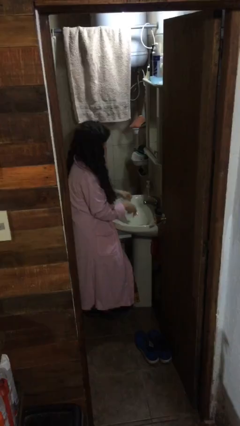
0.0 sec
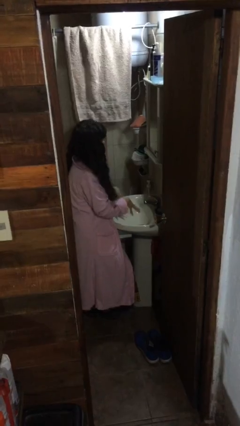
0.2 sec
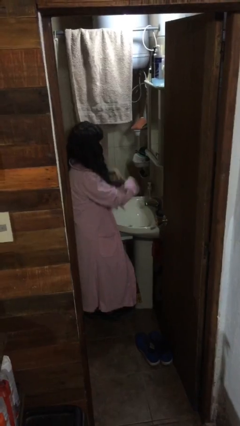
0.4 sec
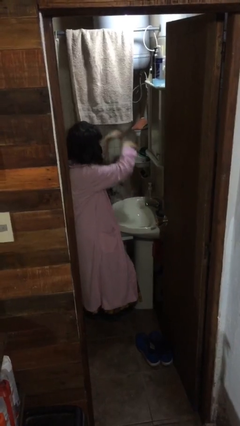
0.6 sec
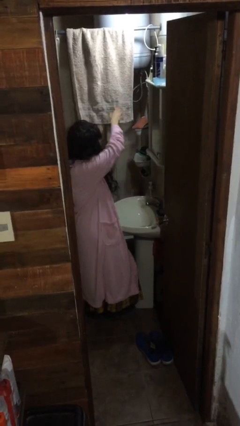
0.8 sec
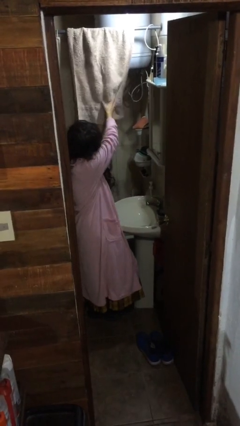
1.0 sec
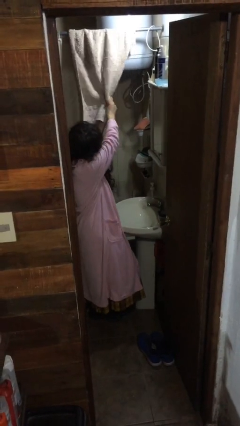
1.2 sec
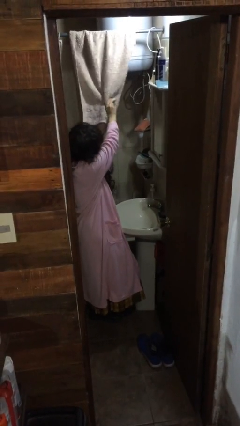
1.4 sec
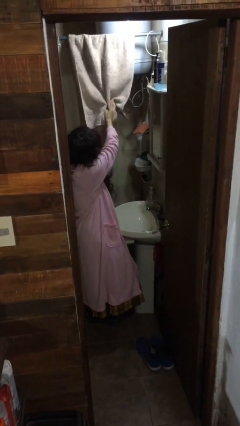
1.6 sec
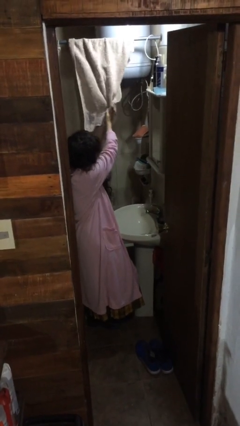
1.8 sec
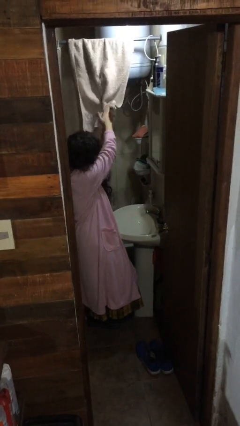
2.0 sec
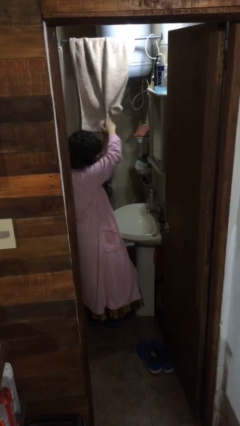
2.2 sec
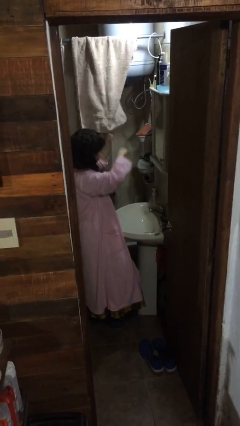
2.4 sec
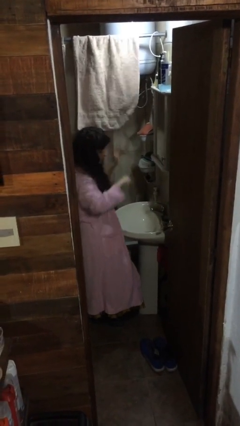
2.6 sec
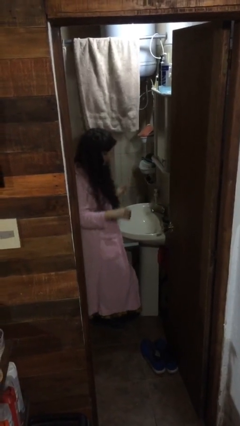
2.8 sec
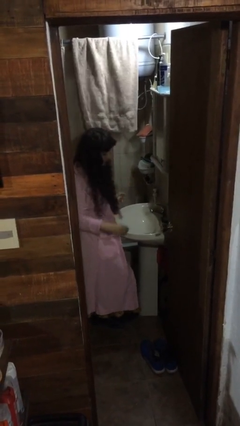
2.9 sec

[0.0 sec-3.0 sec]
person dries hands with towel

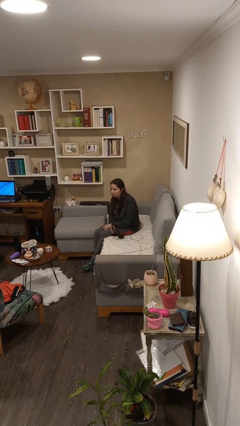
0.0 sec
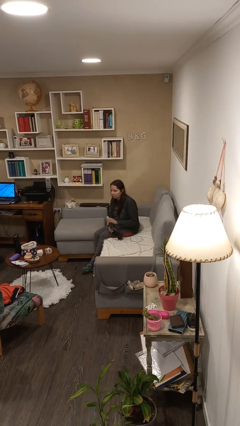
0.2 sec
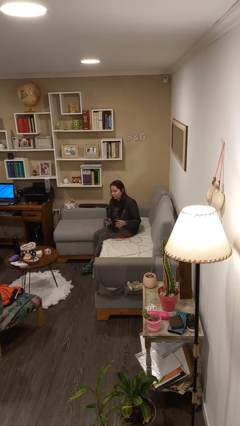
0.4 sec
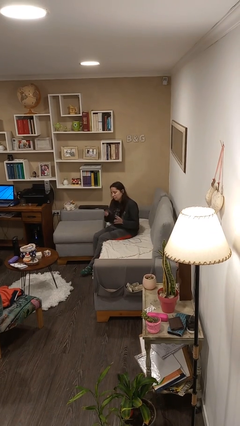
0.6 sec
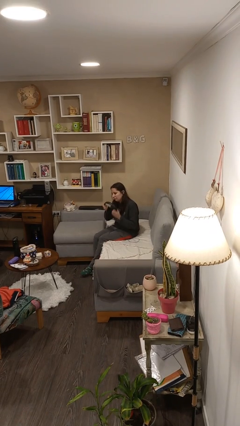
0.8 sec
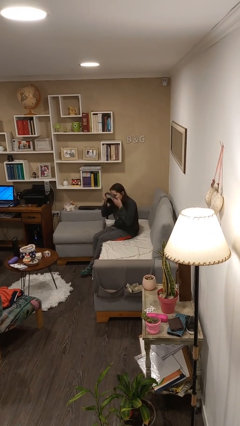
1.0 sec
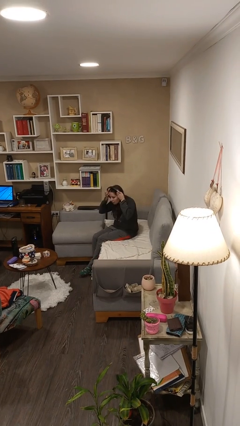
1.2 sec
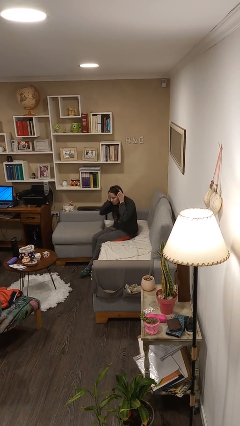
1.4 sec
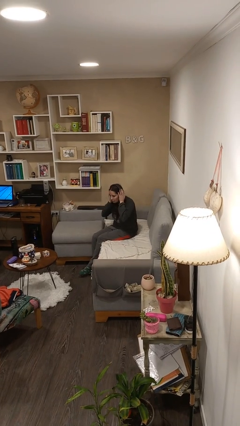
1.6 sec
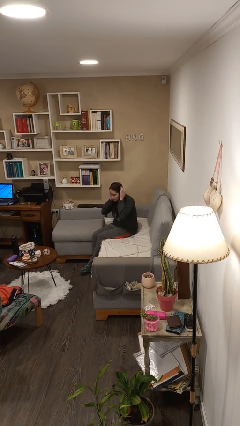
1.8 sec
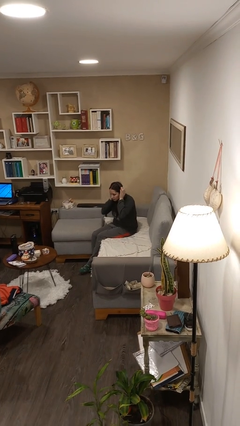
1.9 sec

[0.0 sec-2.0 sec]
person puts on headphones

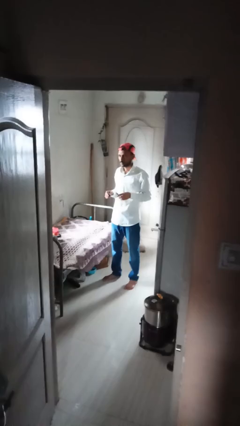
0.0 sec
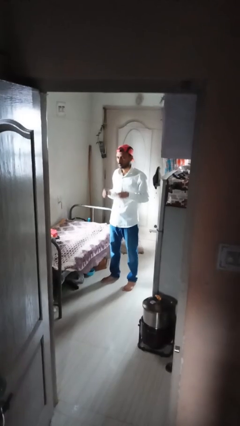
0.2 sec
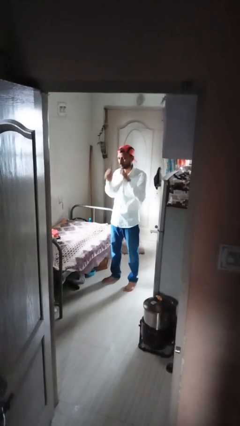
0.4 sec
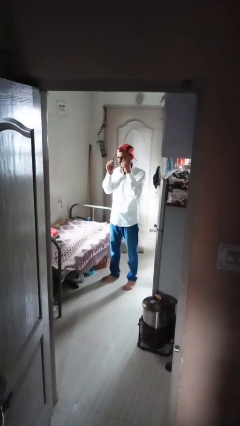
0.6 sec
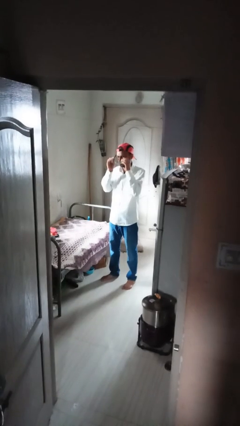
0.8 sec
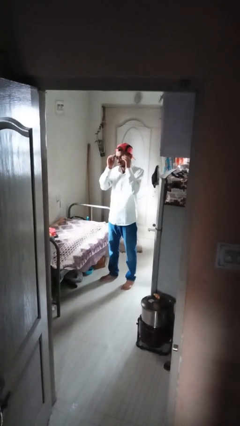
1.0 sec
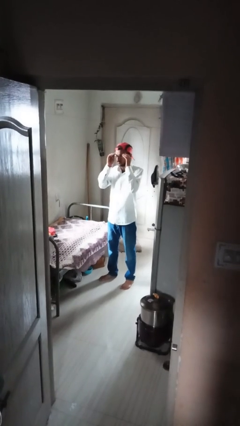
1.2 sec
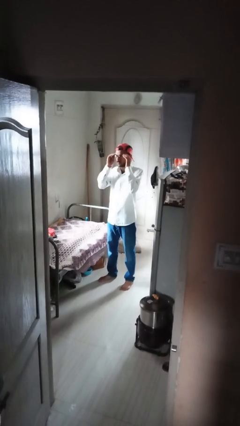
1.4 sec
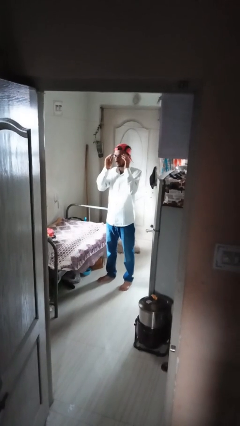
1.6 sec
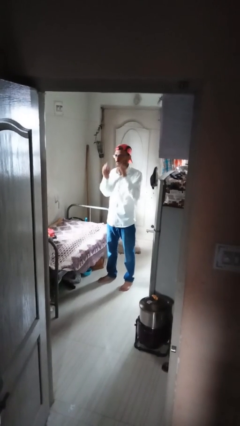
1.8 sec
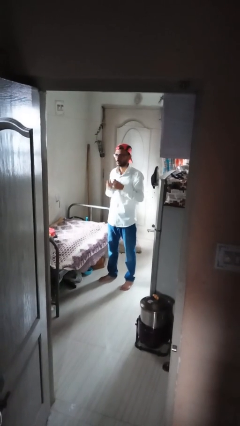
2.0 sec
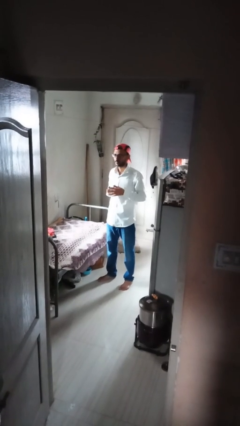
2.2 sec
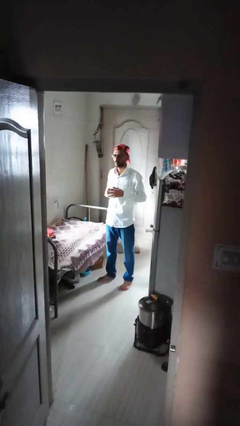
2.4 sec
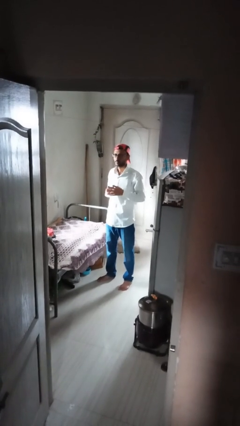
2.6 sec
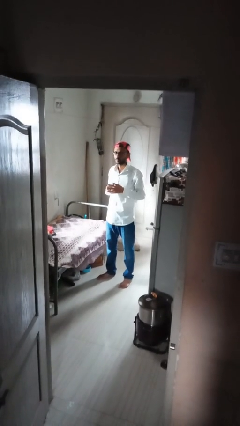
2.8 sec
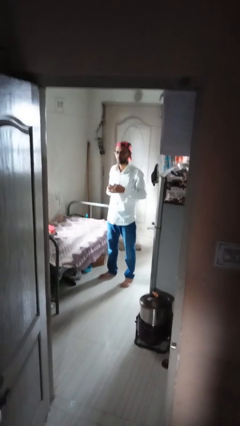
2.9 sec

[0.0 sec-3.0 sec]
person puts on glasses

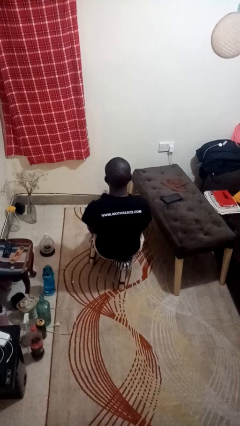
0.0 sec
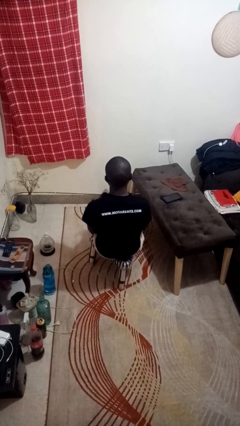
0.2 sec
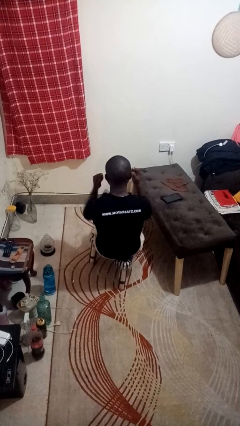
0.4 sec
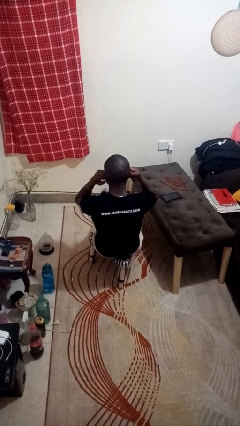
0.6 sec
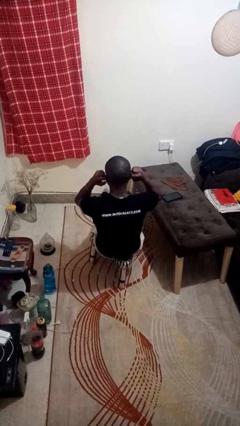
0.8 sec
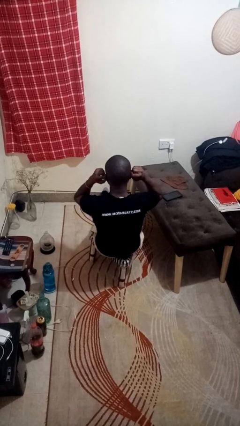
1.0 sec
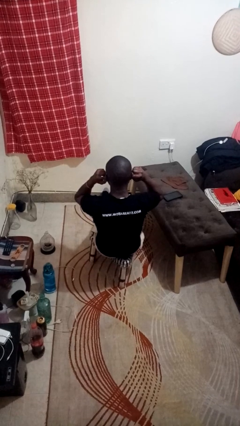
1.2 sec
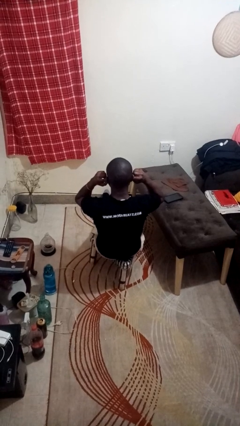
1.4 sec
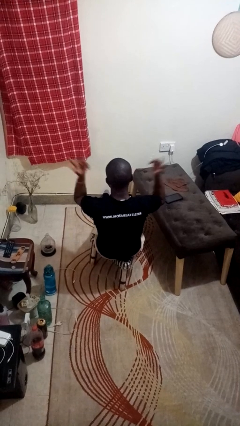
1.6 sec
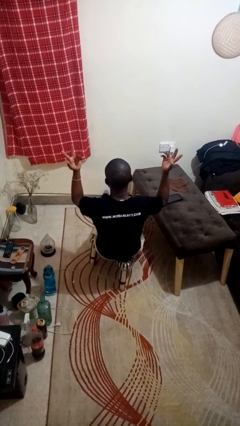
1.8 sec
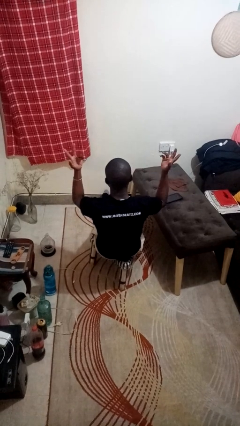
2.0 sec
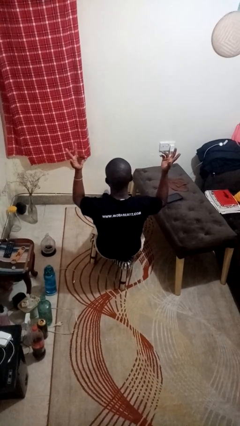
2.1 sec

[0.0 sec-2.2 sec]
person puts fingers in ear

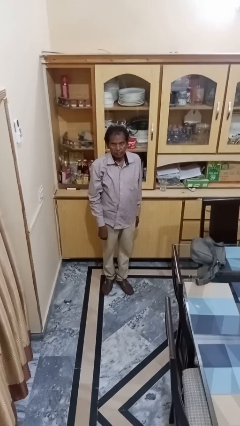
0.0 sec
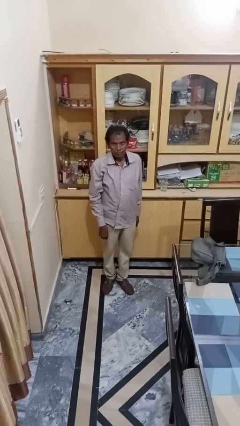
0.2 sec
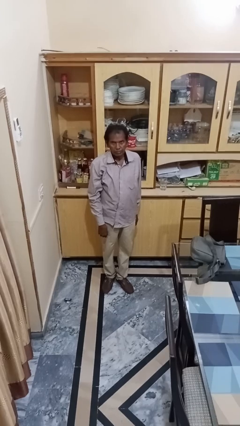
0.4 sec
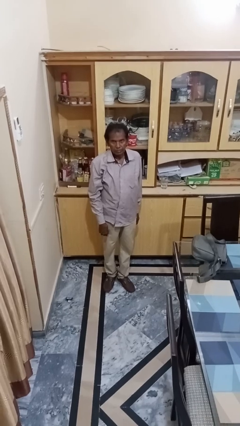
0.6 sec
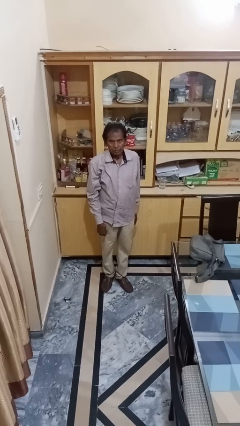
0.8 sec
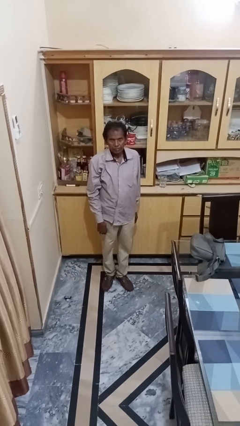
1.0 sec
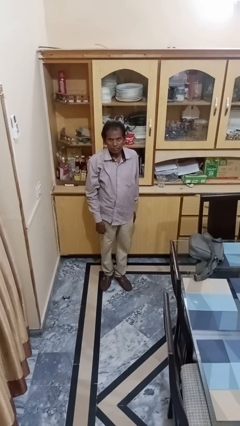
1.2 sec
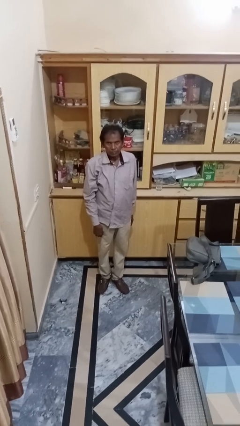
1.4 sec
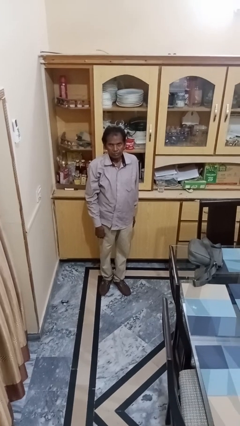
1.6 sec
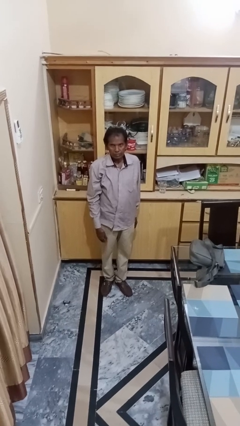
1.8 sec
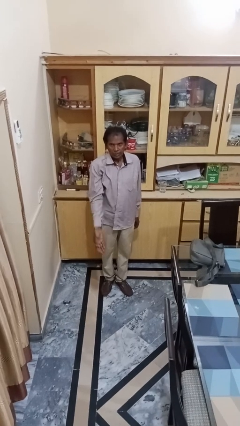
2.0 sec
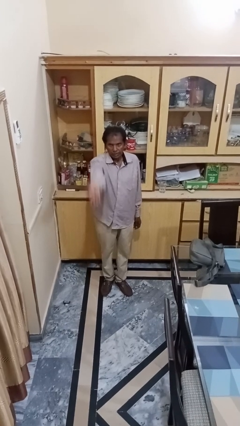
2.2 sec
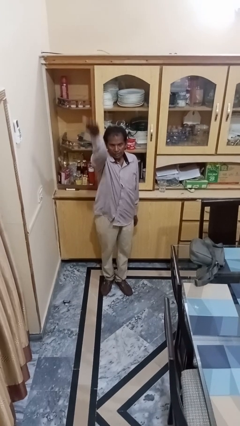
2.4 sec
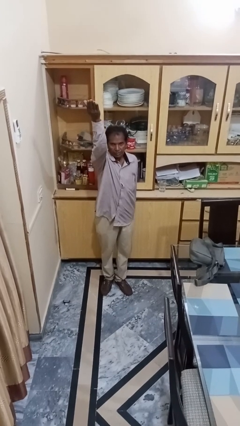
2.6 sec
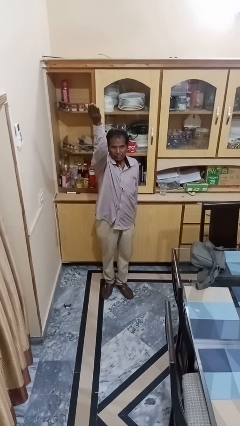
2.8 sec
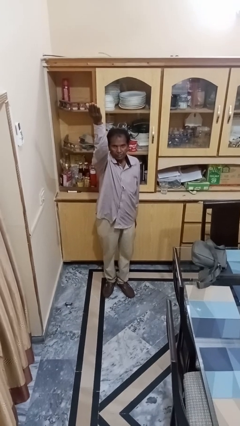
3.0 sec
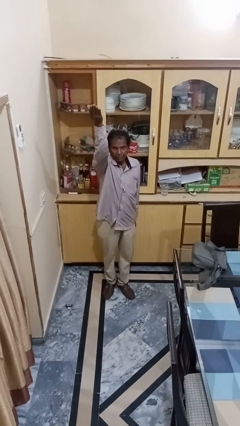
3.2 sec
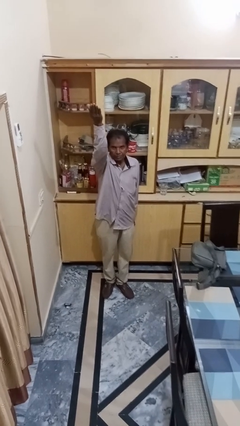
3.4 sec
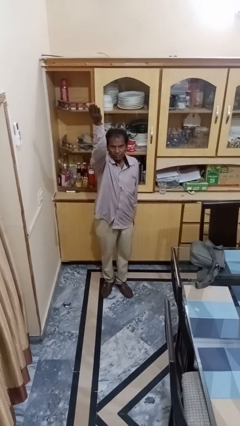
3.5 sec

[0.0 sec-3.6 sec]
person gestures swipe up

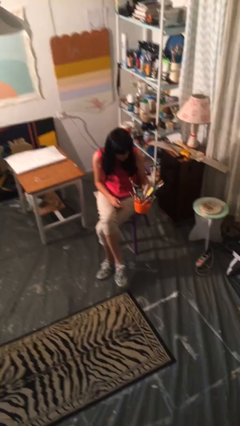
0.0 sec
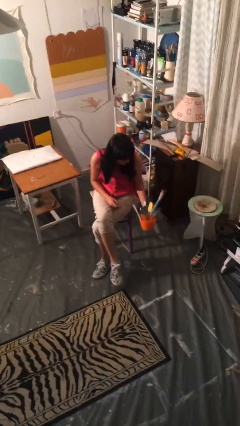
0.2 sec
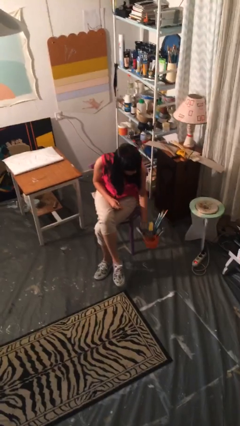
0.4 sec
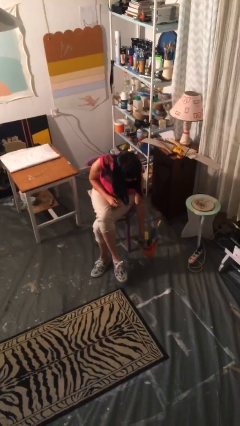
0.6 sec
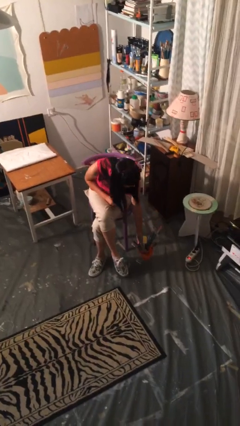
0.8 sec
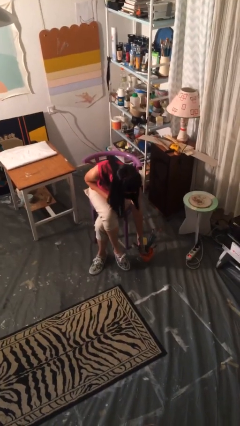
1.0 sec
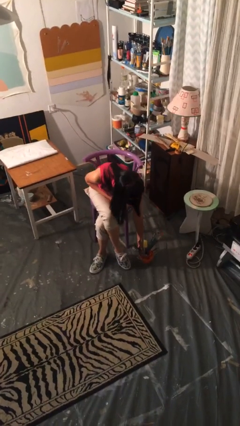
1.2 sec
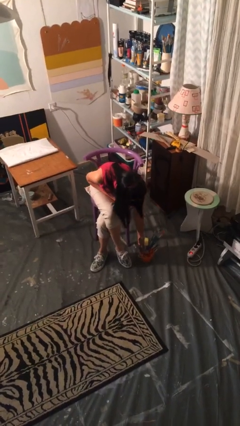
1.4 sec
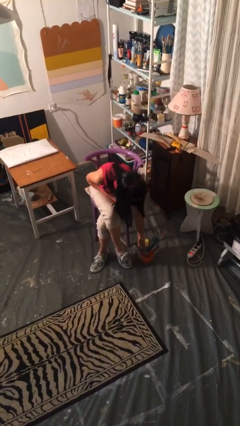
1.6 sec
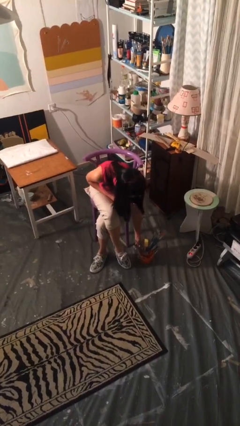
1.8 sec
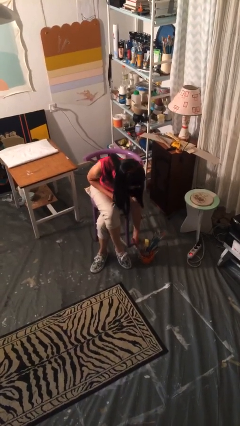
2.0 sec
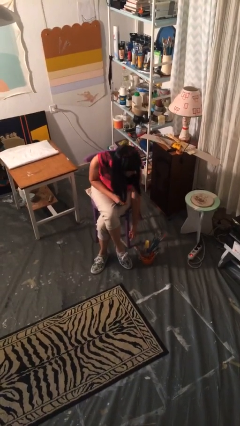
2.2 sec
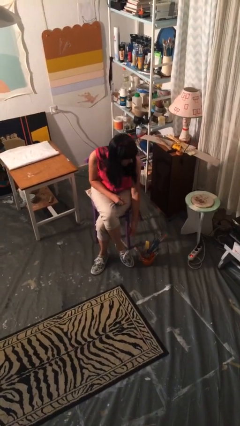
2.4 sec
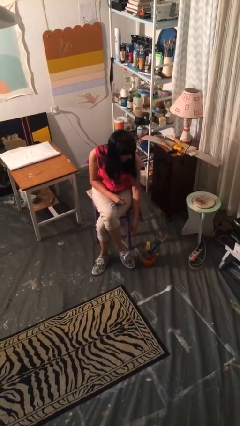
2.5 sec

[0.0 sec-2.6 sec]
person puts down object on floor

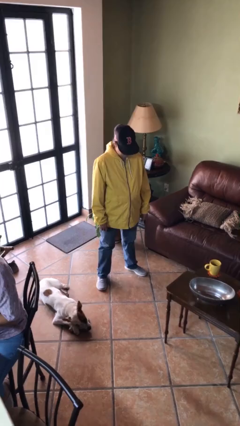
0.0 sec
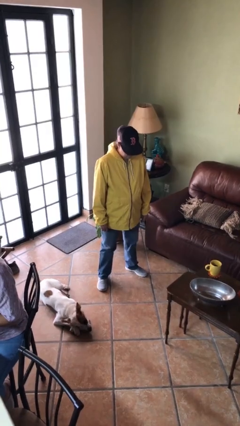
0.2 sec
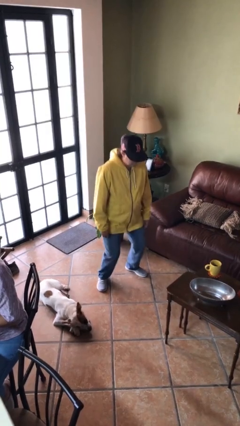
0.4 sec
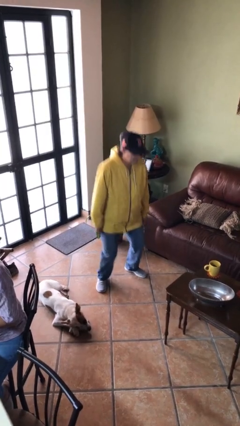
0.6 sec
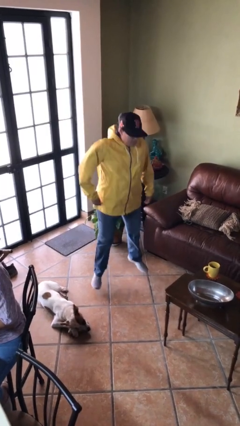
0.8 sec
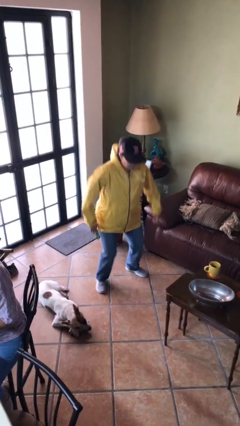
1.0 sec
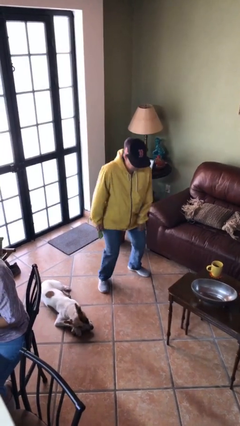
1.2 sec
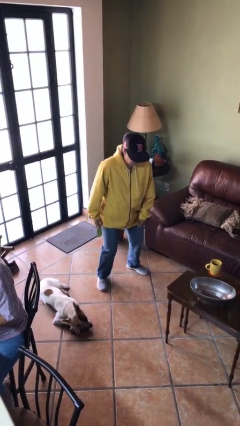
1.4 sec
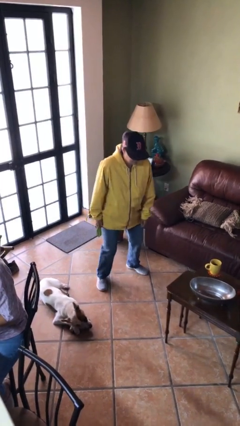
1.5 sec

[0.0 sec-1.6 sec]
person jumps
